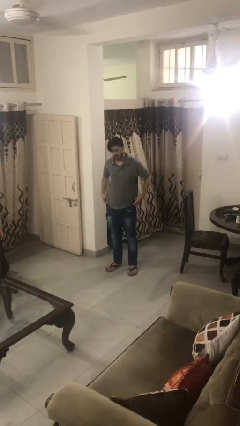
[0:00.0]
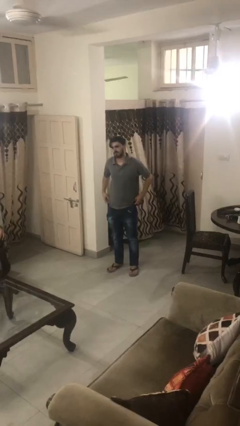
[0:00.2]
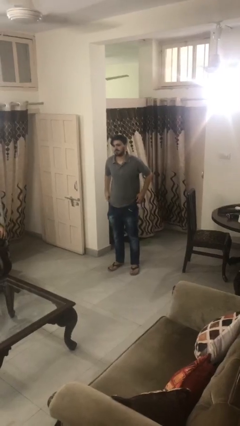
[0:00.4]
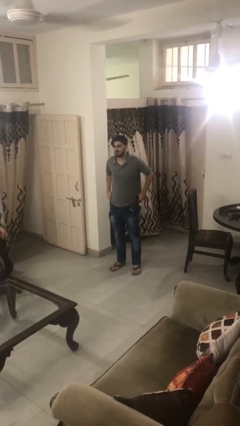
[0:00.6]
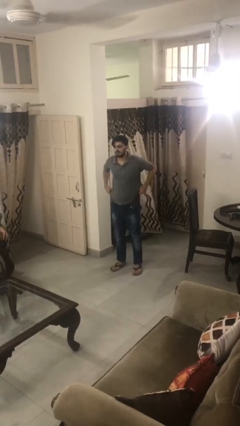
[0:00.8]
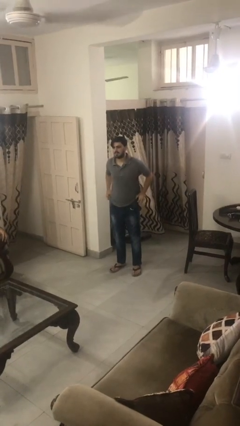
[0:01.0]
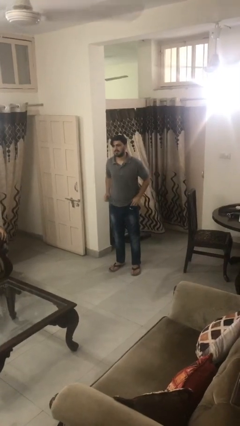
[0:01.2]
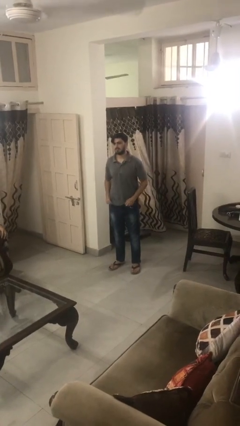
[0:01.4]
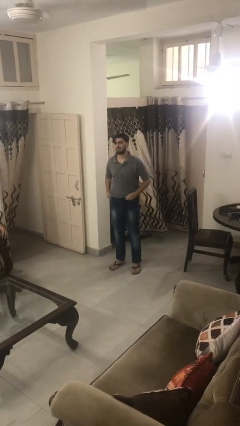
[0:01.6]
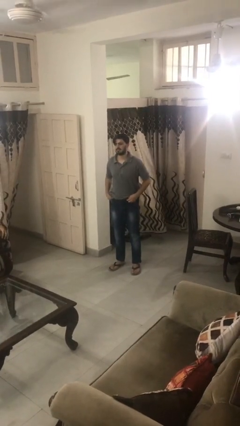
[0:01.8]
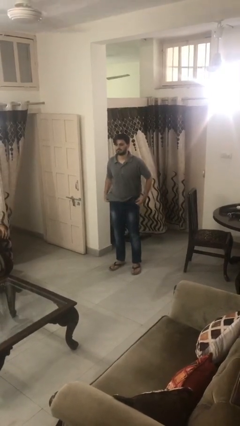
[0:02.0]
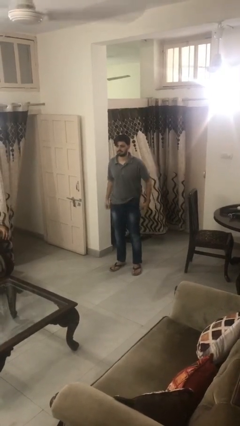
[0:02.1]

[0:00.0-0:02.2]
person hikes up pants

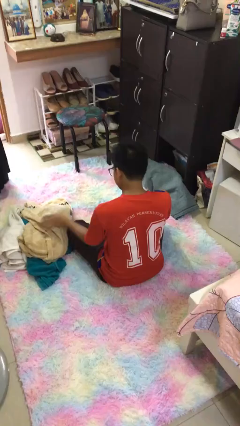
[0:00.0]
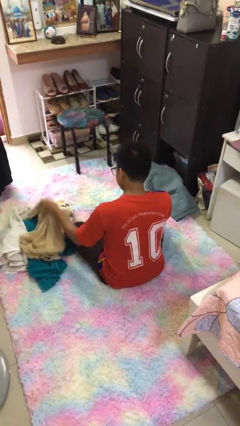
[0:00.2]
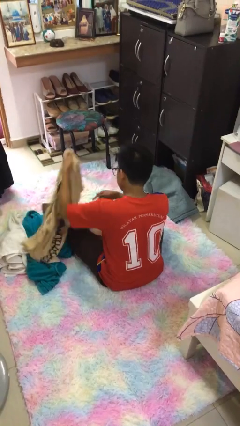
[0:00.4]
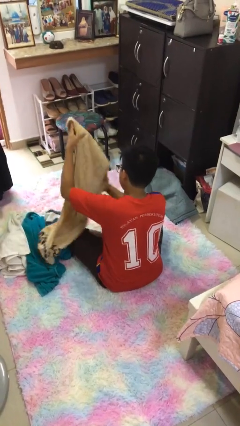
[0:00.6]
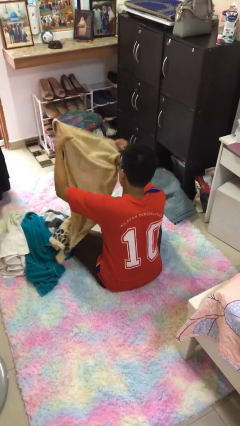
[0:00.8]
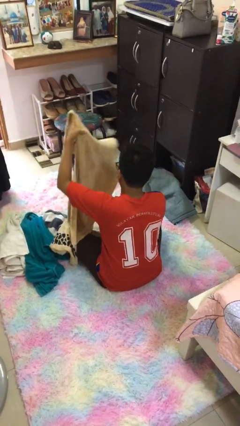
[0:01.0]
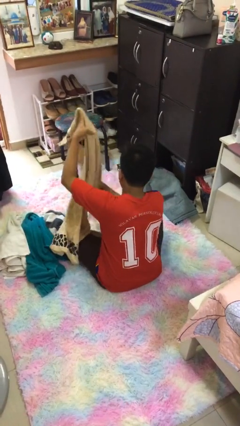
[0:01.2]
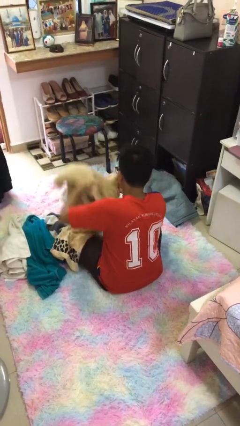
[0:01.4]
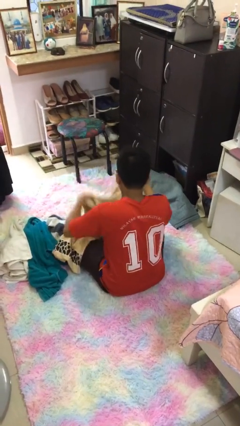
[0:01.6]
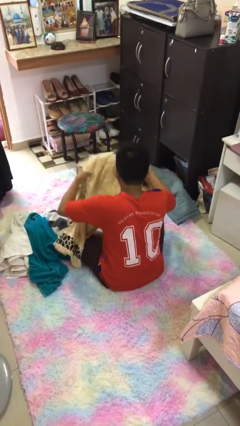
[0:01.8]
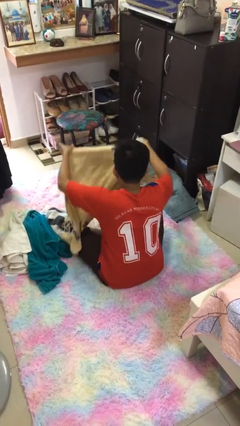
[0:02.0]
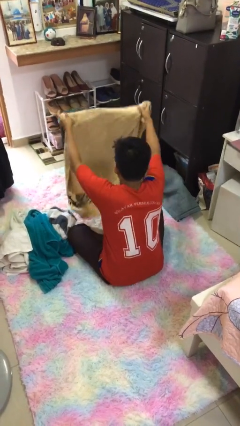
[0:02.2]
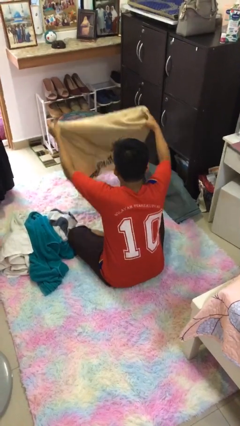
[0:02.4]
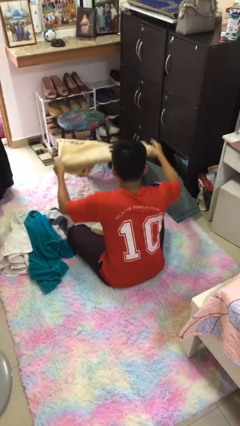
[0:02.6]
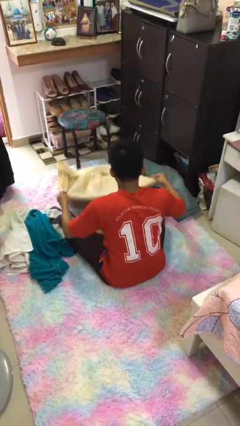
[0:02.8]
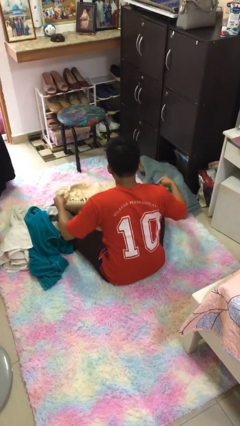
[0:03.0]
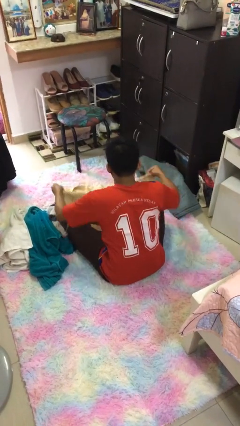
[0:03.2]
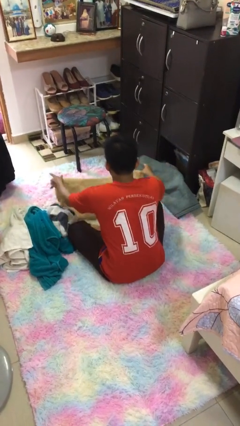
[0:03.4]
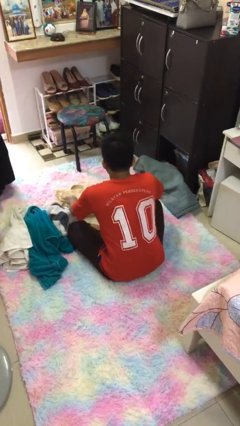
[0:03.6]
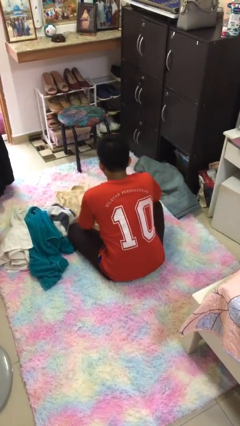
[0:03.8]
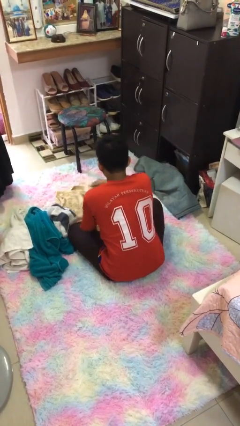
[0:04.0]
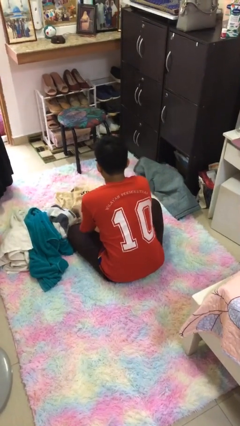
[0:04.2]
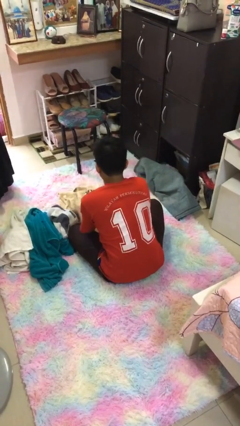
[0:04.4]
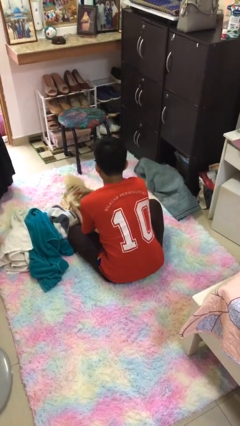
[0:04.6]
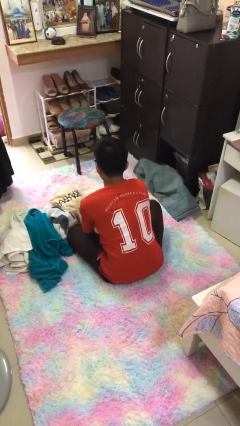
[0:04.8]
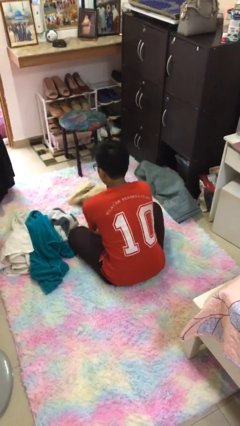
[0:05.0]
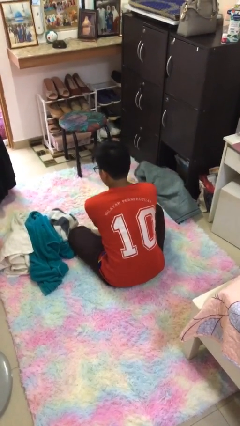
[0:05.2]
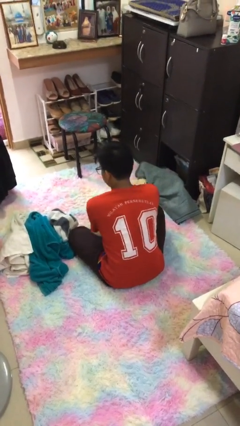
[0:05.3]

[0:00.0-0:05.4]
person folds towel

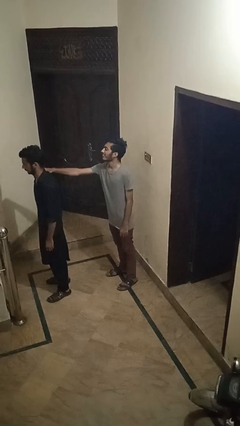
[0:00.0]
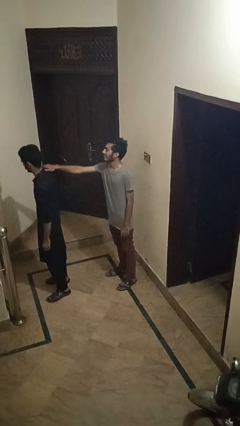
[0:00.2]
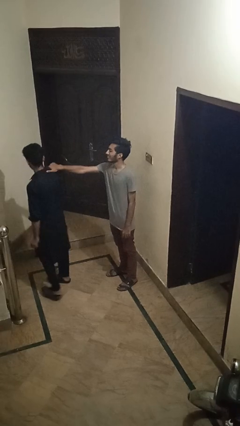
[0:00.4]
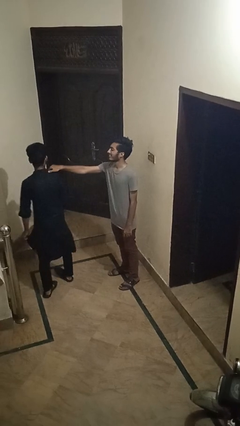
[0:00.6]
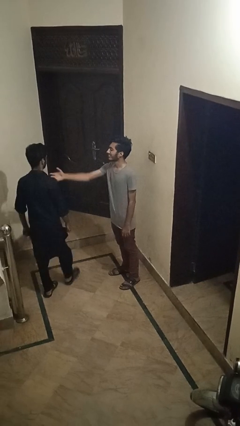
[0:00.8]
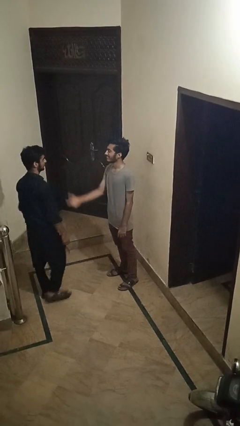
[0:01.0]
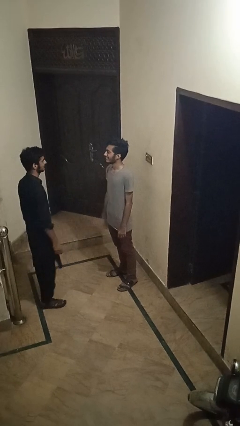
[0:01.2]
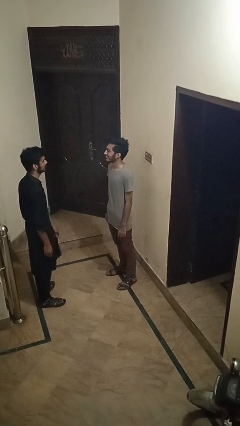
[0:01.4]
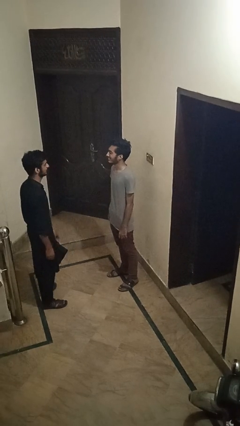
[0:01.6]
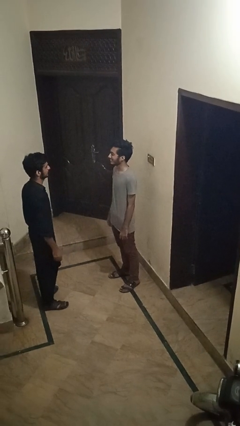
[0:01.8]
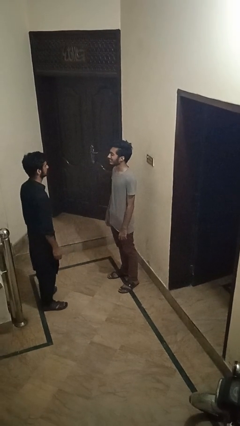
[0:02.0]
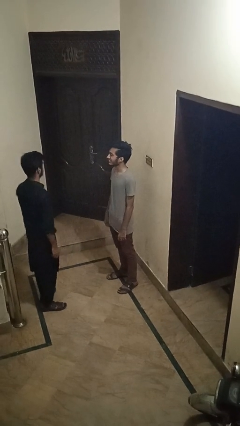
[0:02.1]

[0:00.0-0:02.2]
person spins person around

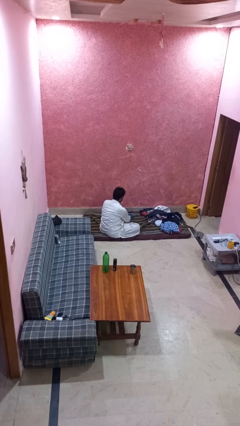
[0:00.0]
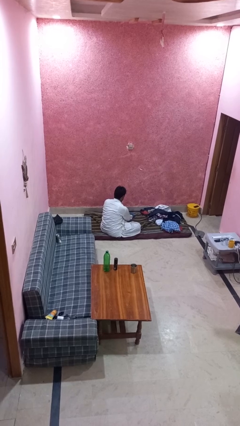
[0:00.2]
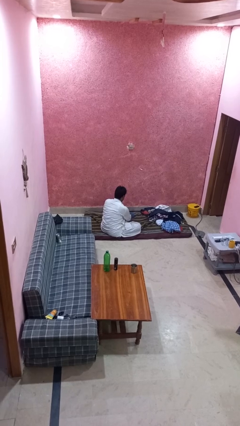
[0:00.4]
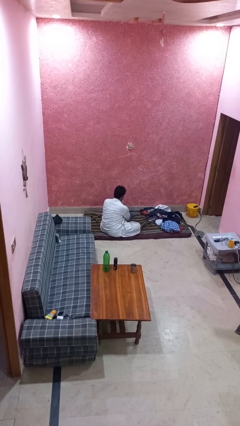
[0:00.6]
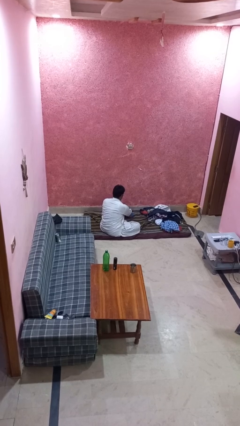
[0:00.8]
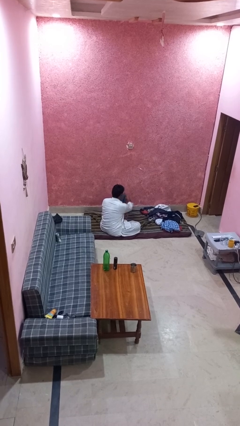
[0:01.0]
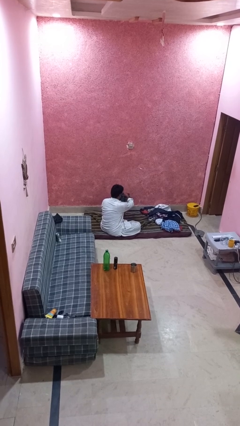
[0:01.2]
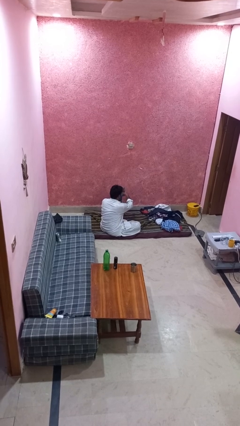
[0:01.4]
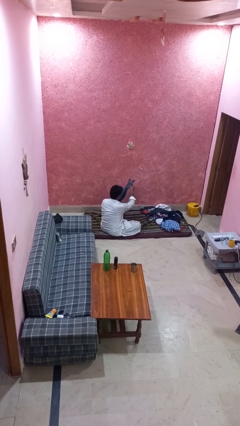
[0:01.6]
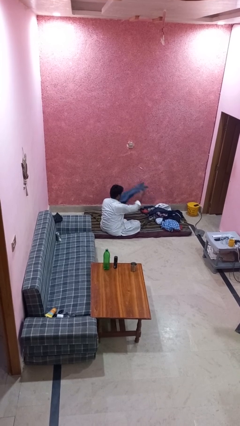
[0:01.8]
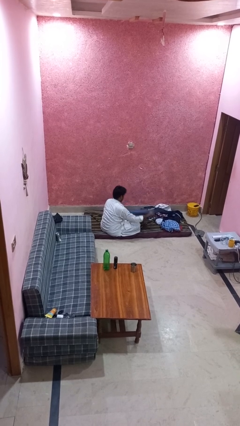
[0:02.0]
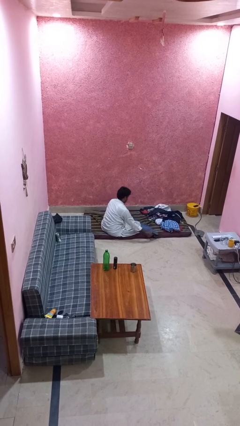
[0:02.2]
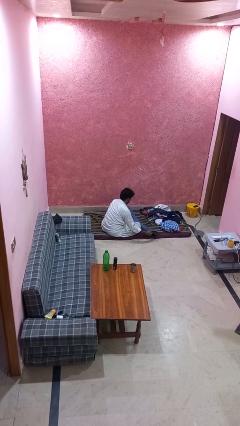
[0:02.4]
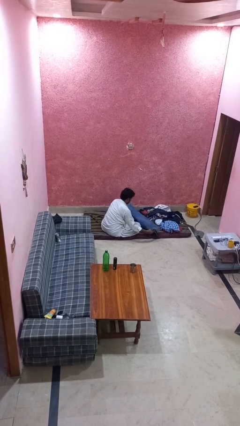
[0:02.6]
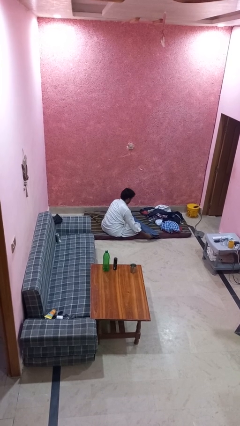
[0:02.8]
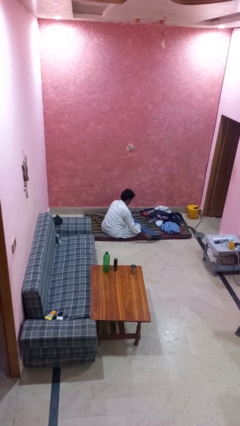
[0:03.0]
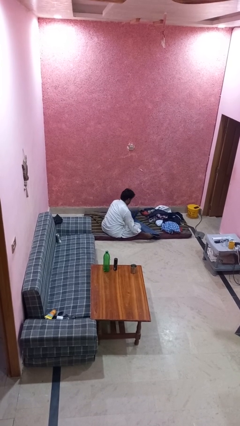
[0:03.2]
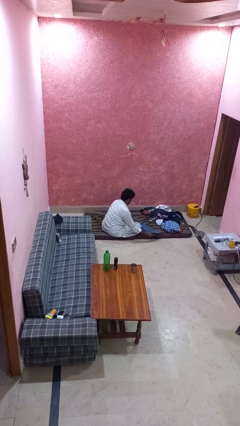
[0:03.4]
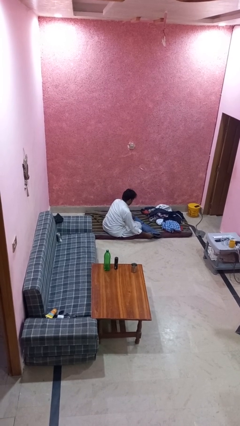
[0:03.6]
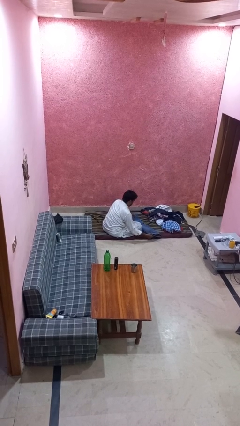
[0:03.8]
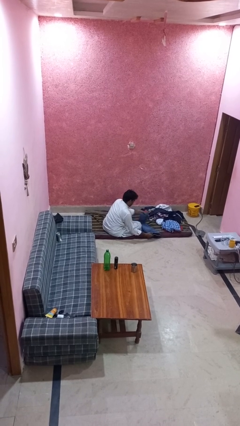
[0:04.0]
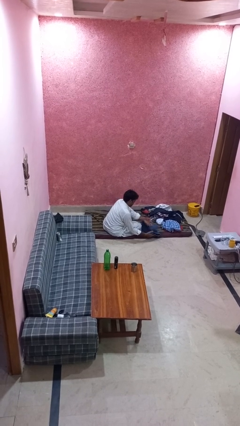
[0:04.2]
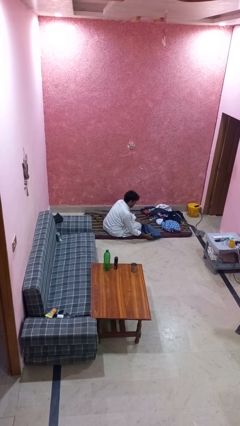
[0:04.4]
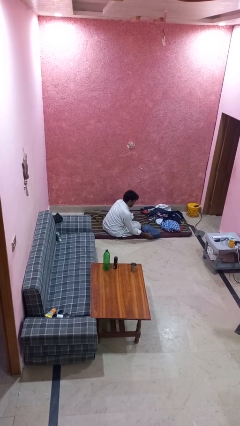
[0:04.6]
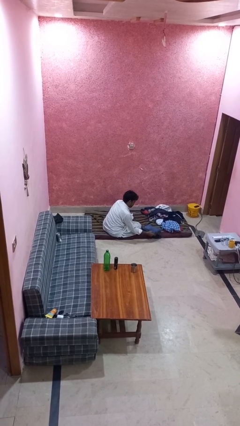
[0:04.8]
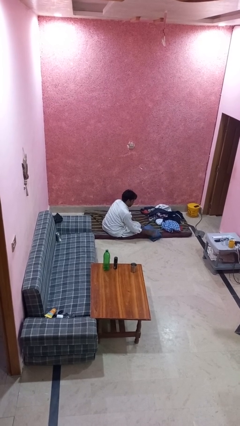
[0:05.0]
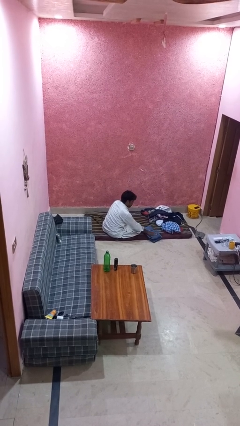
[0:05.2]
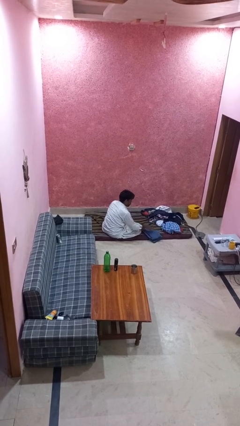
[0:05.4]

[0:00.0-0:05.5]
person folds pants

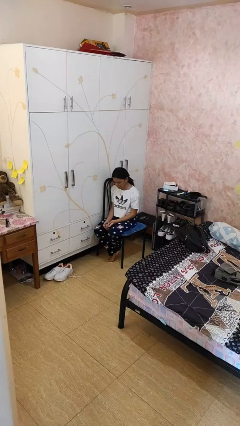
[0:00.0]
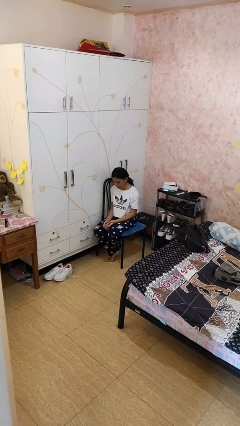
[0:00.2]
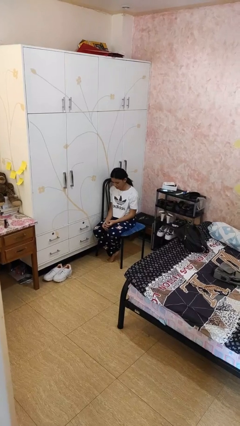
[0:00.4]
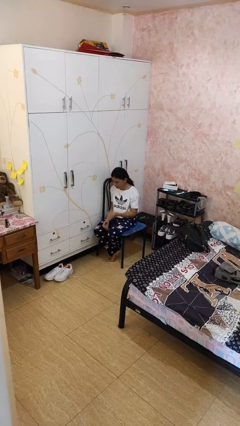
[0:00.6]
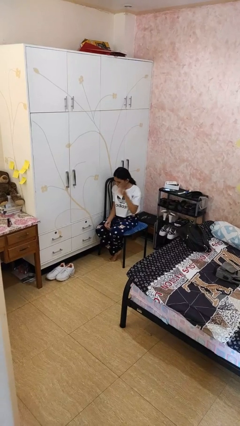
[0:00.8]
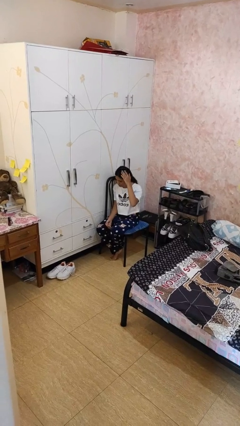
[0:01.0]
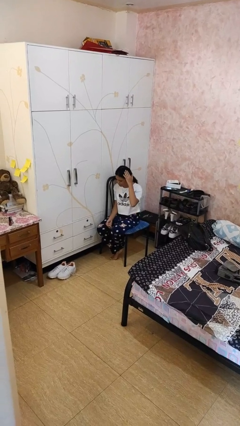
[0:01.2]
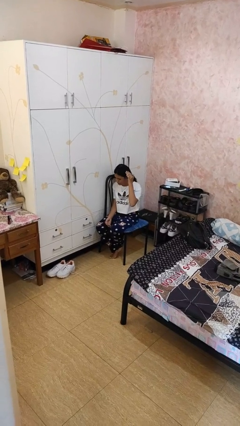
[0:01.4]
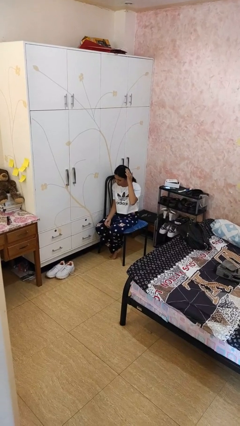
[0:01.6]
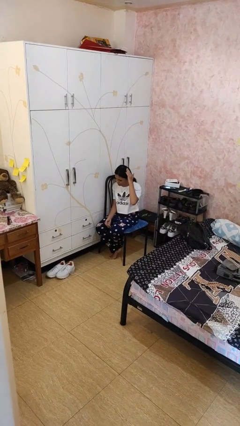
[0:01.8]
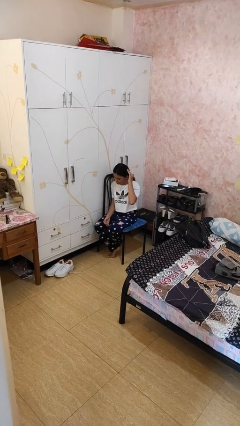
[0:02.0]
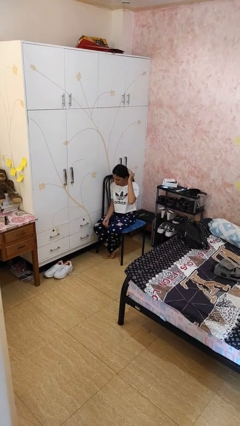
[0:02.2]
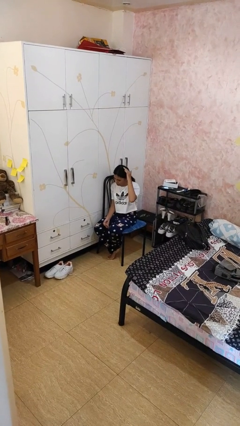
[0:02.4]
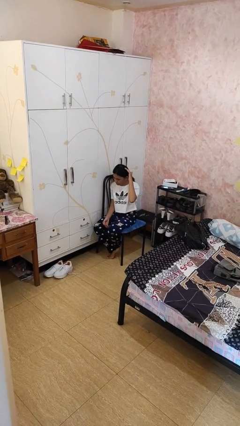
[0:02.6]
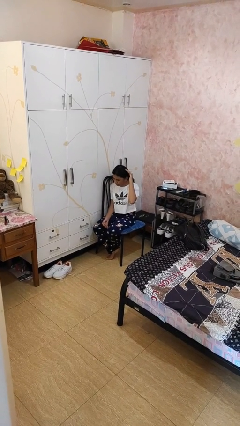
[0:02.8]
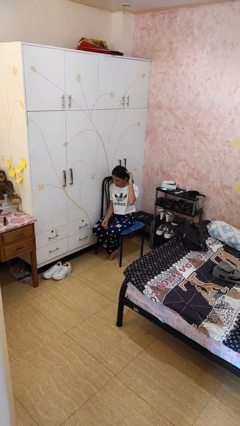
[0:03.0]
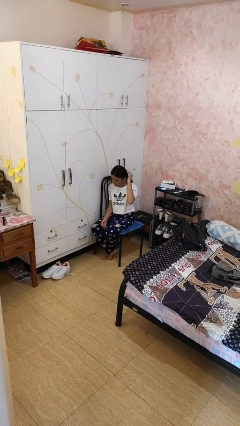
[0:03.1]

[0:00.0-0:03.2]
person pats head
